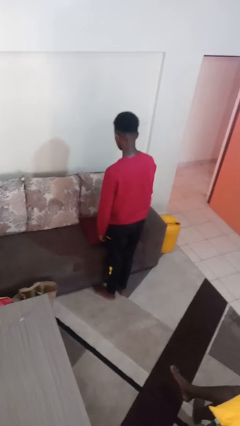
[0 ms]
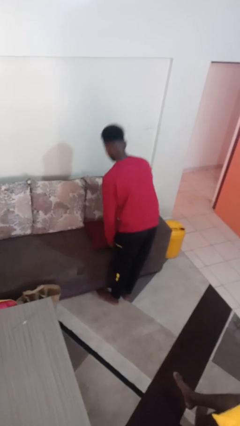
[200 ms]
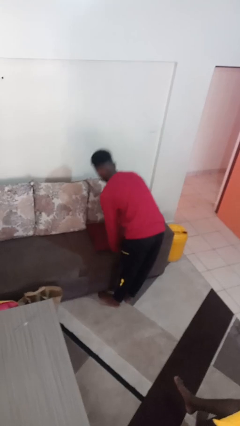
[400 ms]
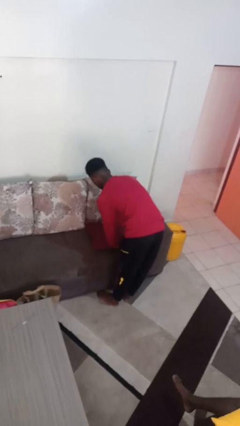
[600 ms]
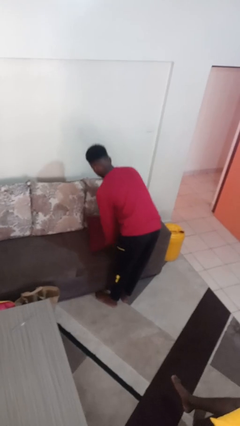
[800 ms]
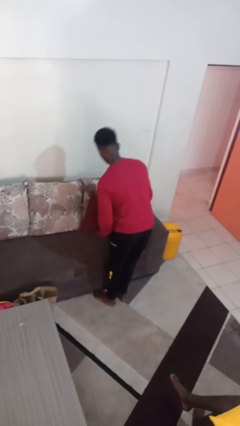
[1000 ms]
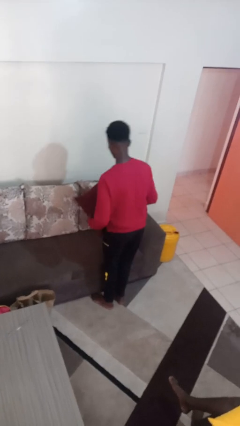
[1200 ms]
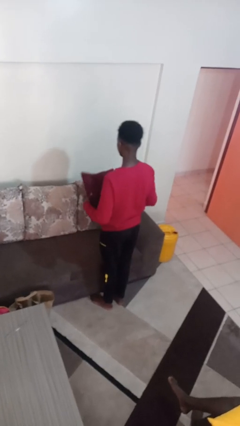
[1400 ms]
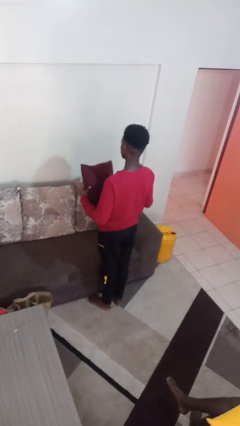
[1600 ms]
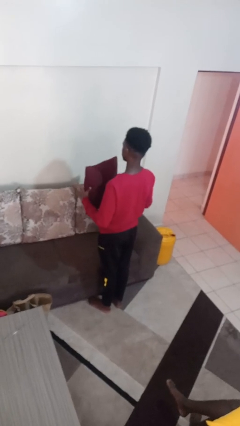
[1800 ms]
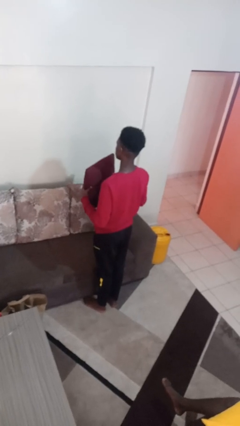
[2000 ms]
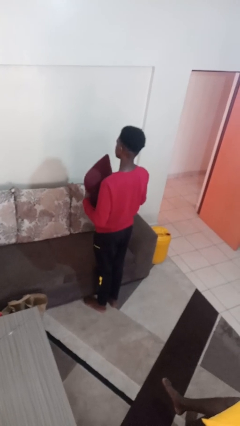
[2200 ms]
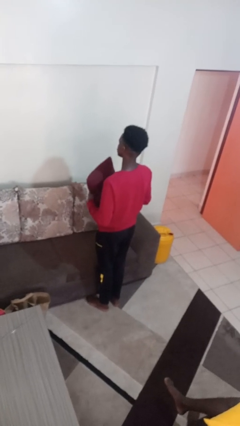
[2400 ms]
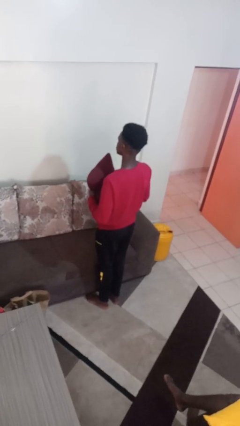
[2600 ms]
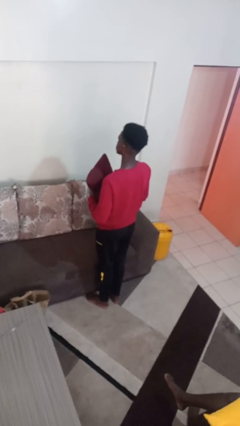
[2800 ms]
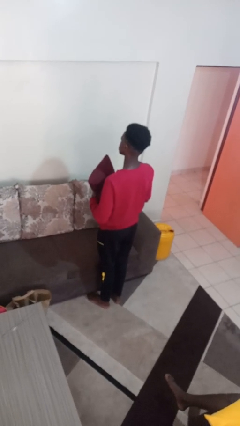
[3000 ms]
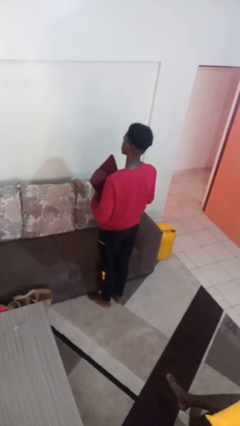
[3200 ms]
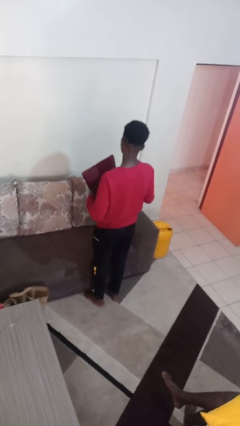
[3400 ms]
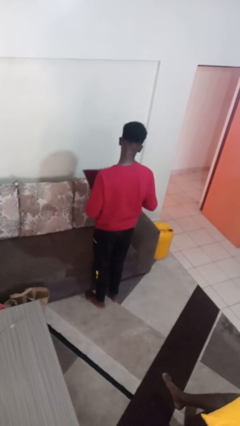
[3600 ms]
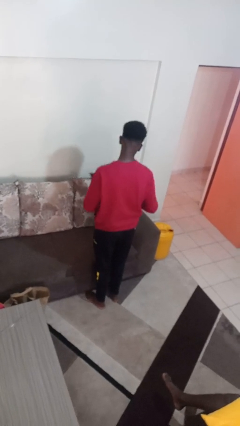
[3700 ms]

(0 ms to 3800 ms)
person picks up object from couch

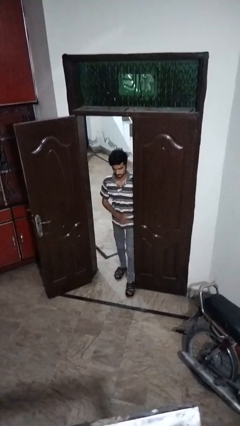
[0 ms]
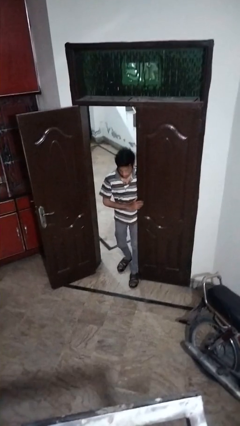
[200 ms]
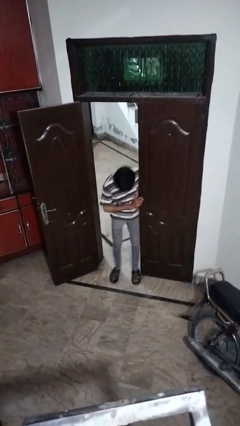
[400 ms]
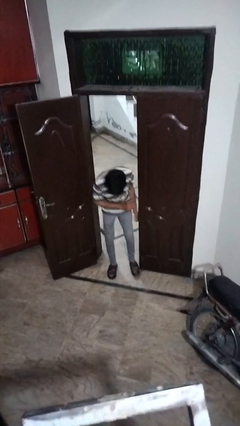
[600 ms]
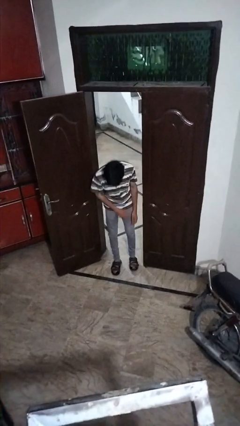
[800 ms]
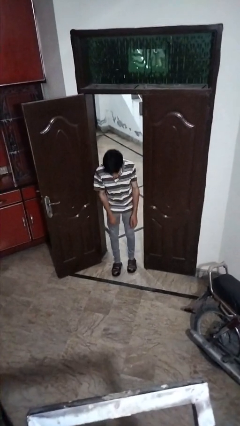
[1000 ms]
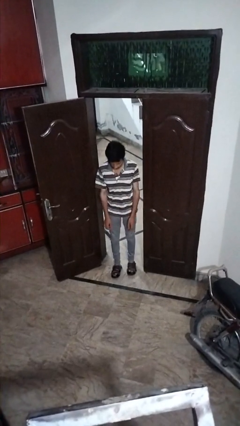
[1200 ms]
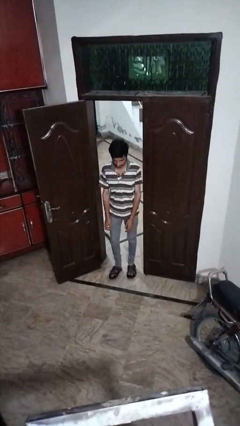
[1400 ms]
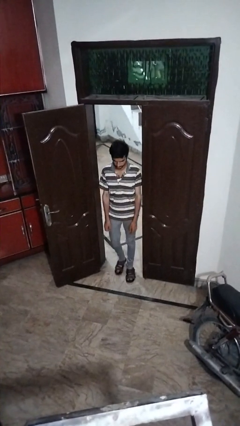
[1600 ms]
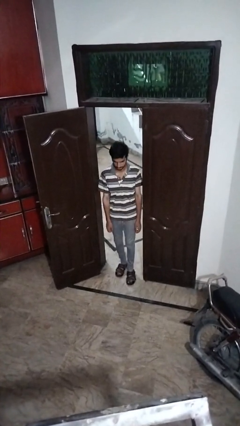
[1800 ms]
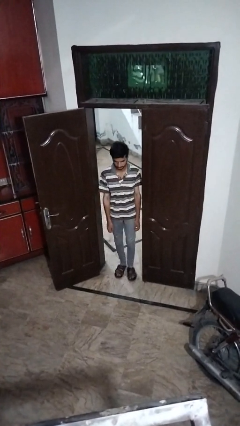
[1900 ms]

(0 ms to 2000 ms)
person bumps into wall

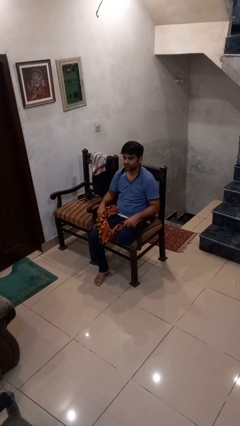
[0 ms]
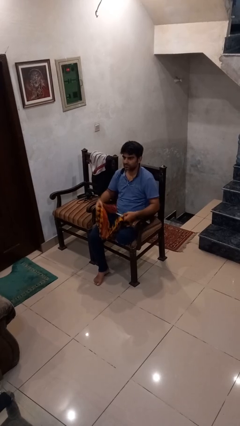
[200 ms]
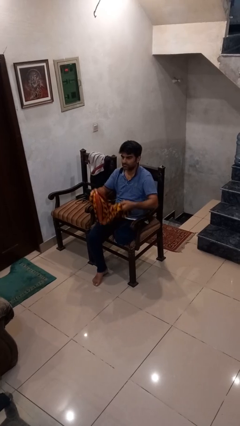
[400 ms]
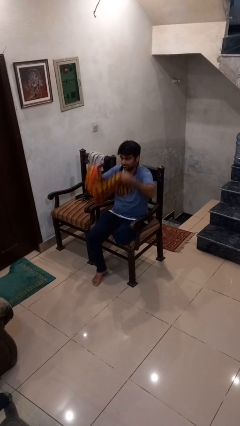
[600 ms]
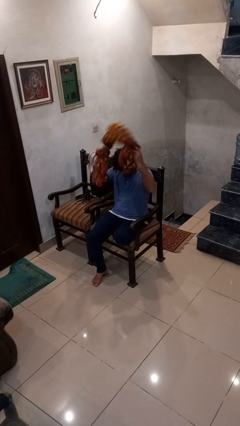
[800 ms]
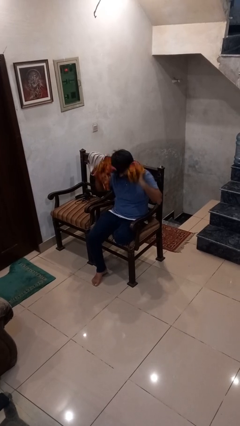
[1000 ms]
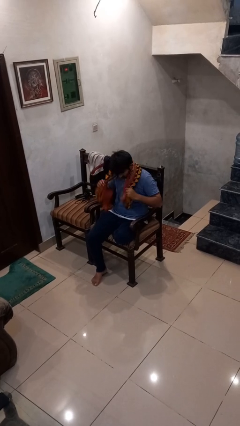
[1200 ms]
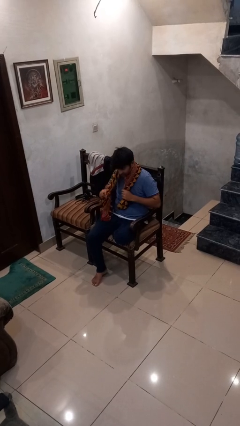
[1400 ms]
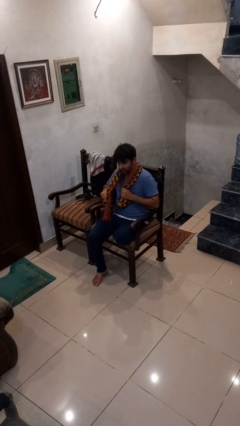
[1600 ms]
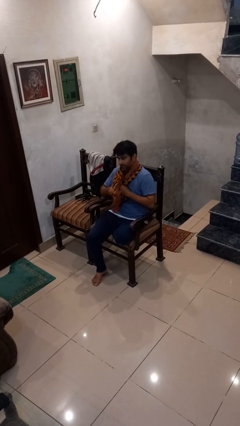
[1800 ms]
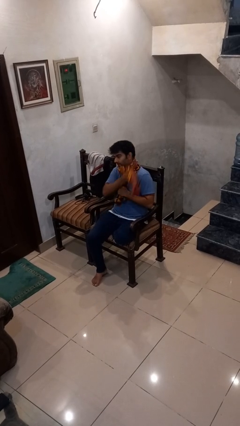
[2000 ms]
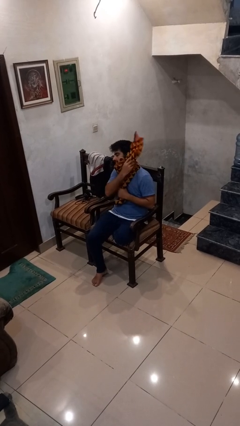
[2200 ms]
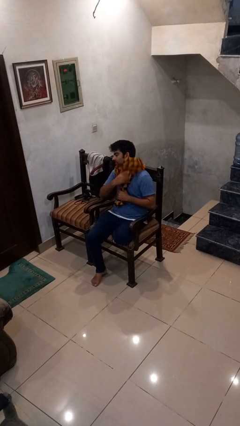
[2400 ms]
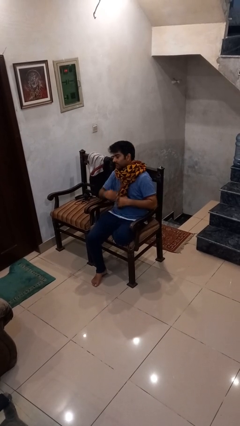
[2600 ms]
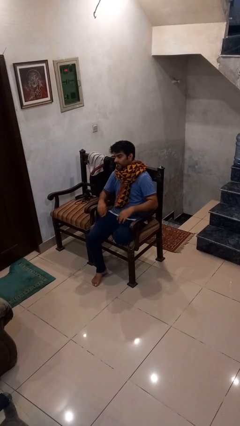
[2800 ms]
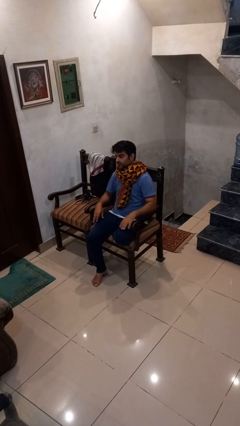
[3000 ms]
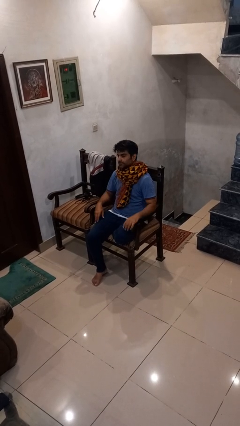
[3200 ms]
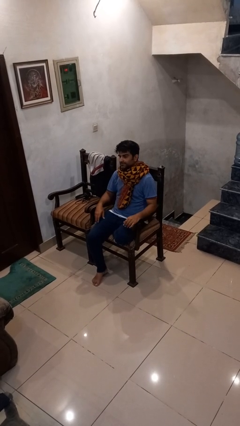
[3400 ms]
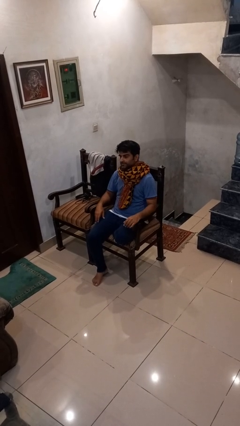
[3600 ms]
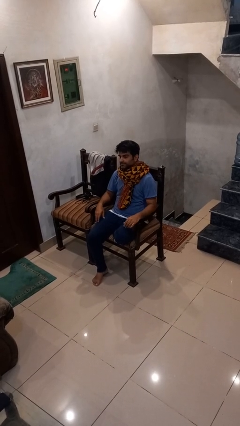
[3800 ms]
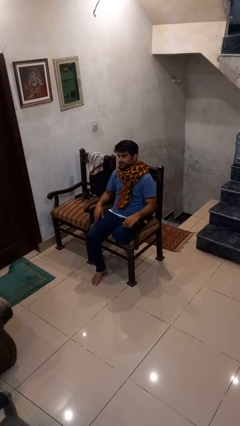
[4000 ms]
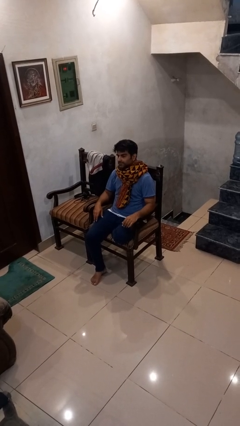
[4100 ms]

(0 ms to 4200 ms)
person puts on scarf

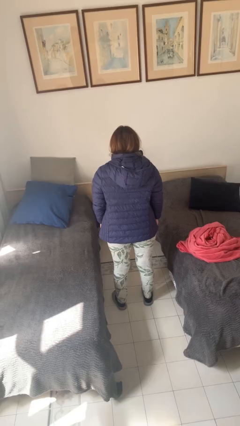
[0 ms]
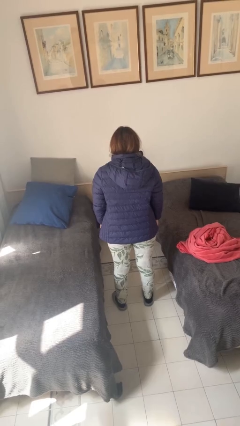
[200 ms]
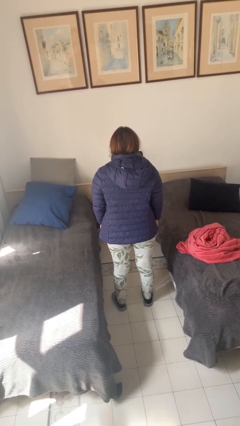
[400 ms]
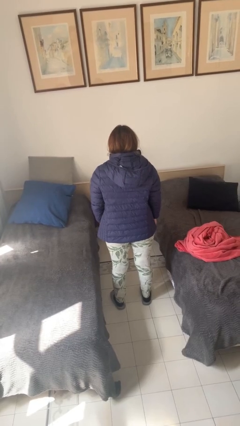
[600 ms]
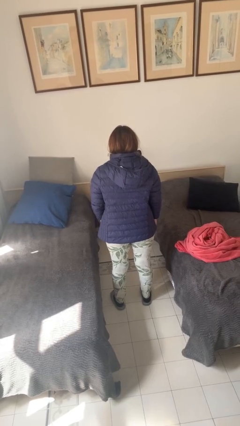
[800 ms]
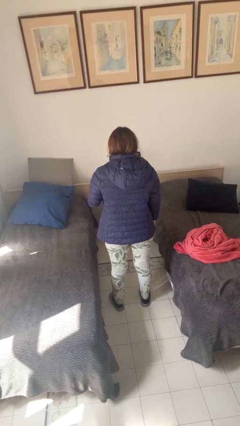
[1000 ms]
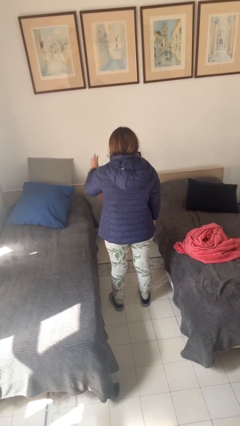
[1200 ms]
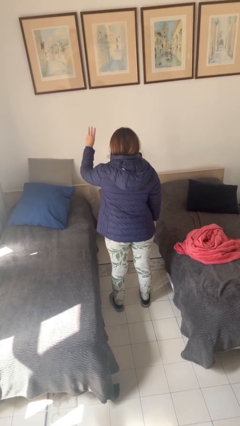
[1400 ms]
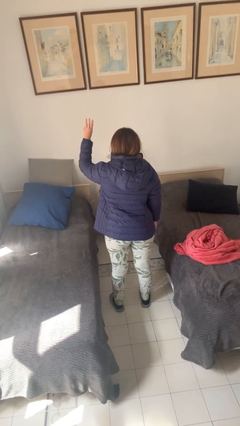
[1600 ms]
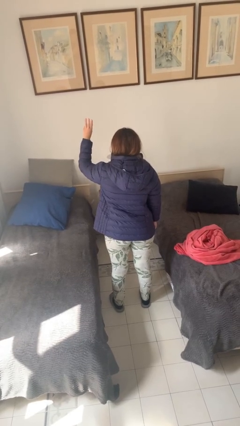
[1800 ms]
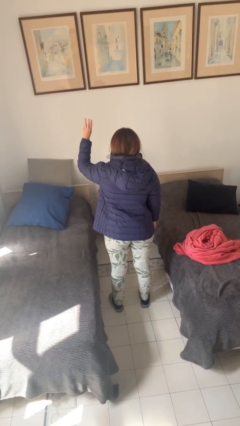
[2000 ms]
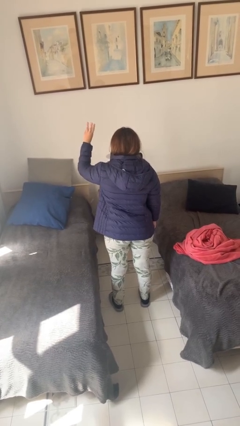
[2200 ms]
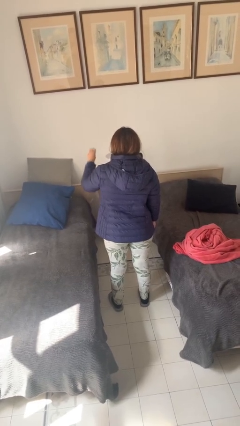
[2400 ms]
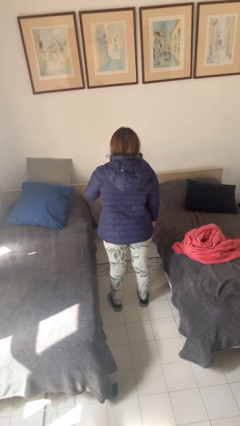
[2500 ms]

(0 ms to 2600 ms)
person gestures number three

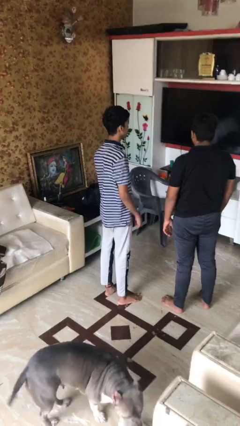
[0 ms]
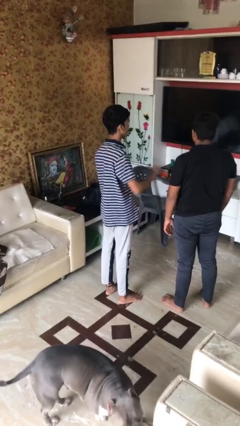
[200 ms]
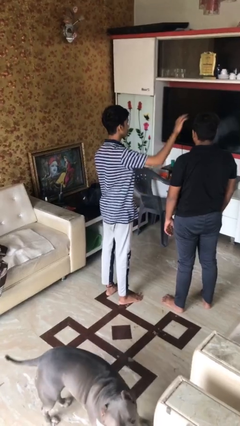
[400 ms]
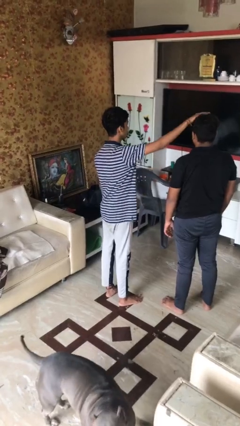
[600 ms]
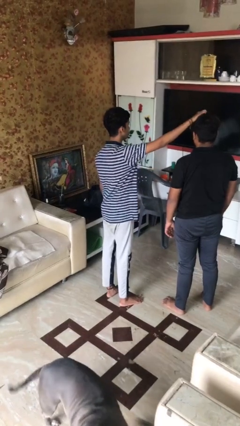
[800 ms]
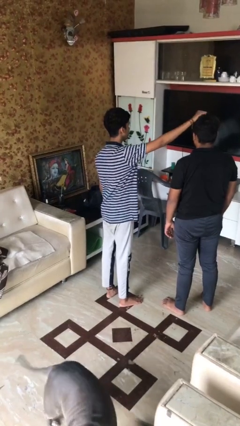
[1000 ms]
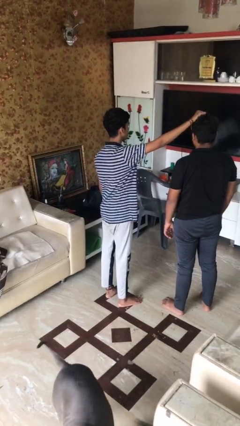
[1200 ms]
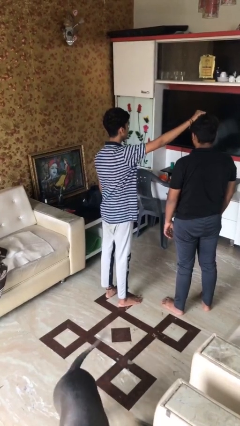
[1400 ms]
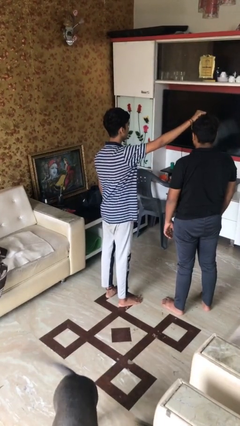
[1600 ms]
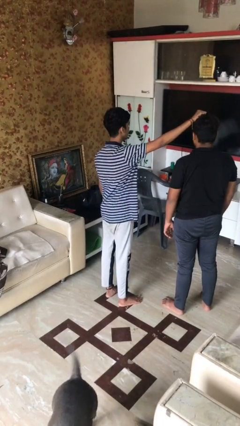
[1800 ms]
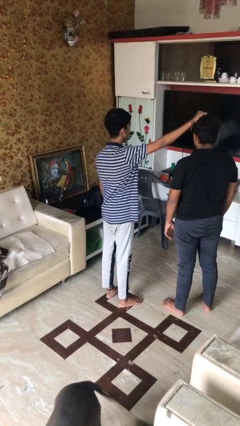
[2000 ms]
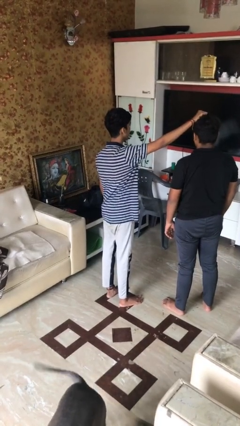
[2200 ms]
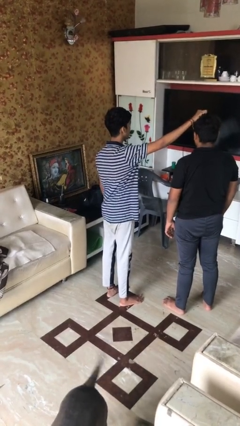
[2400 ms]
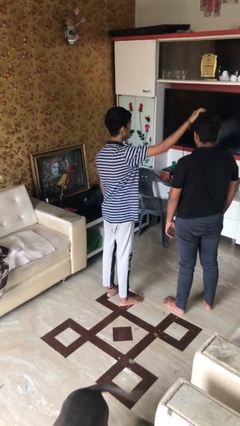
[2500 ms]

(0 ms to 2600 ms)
person grabs person by hair

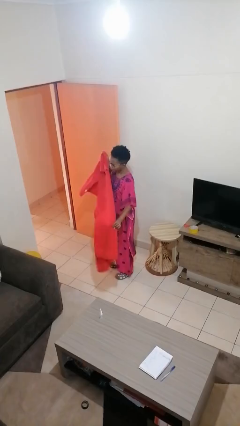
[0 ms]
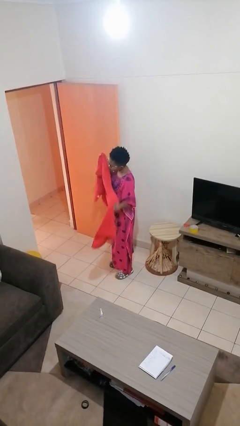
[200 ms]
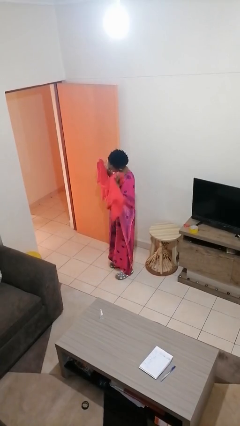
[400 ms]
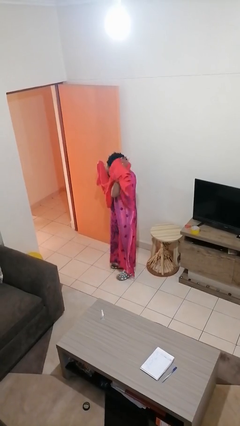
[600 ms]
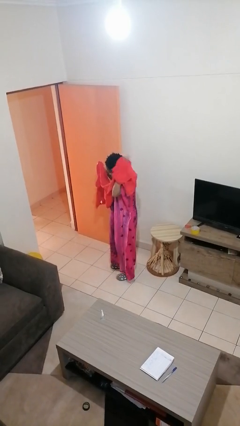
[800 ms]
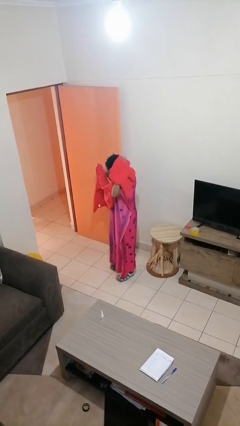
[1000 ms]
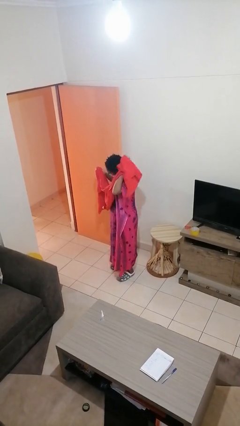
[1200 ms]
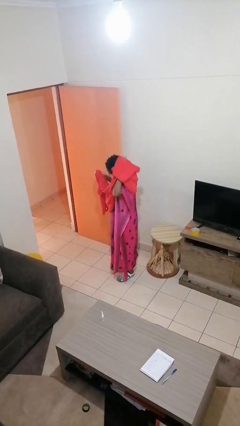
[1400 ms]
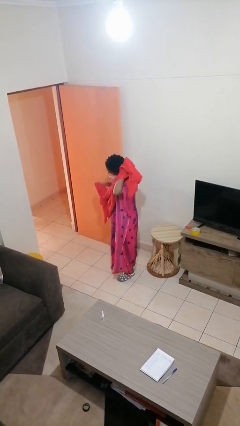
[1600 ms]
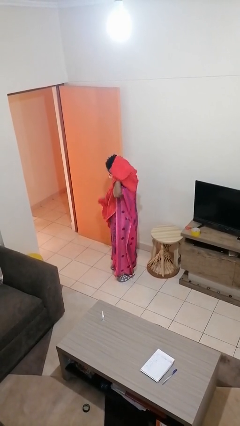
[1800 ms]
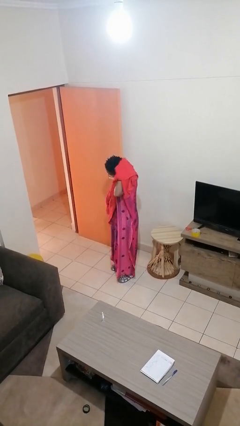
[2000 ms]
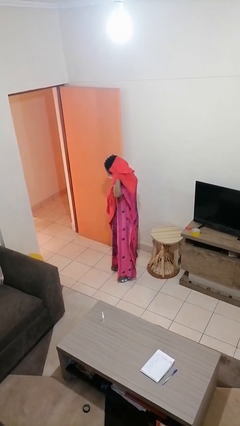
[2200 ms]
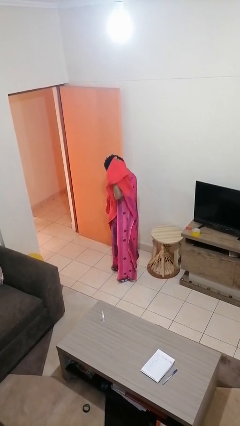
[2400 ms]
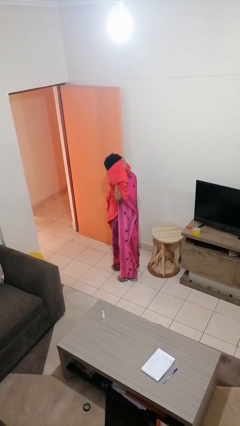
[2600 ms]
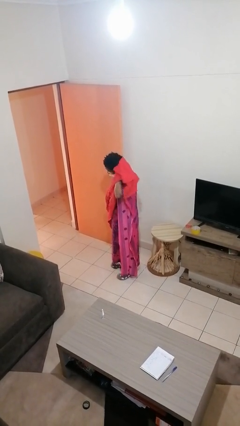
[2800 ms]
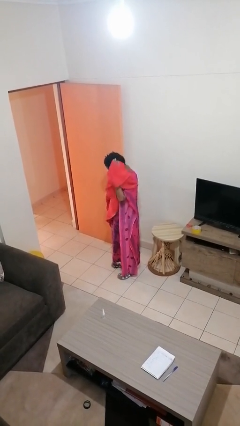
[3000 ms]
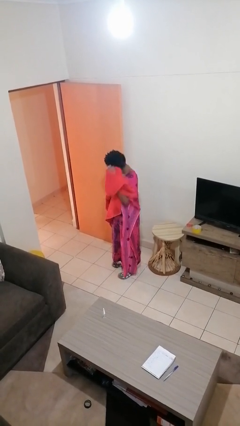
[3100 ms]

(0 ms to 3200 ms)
person dries hair with towel
